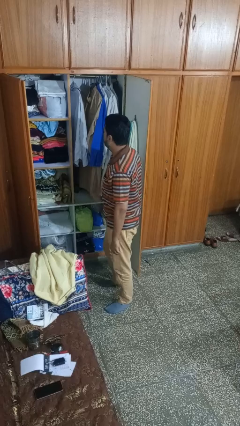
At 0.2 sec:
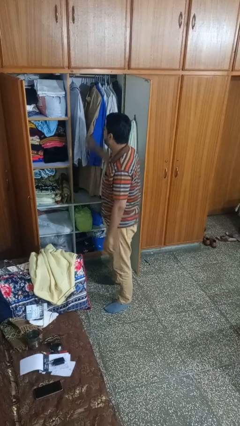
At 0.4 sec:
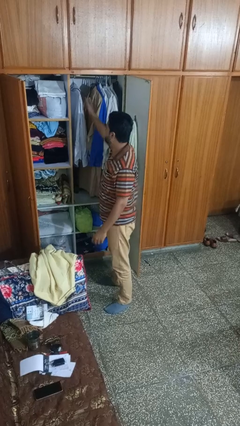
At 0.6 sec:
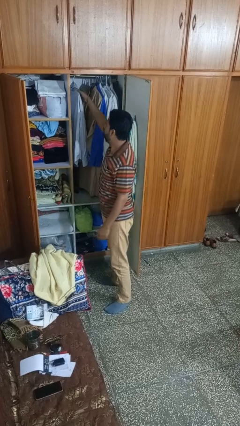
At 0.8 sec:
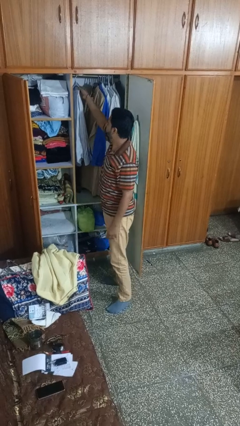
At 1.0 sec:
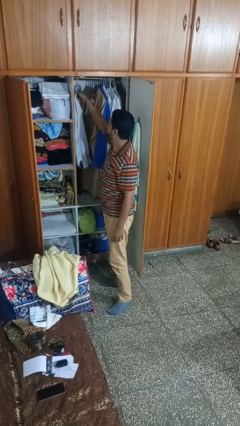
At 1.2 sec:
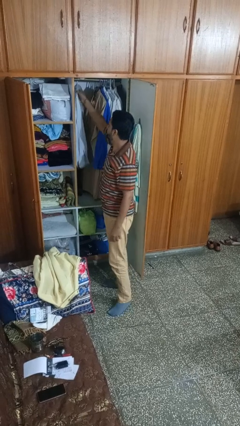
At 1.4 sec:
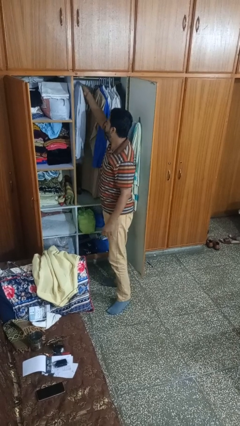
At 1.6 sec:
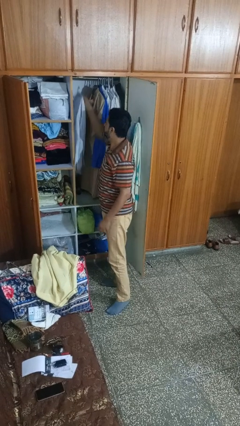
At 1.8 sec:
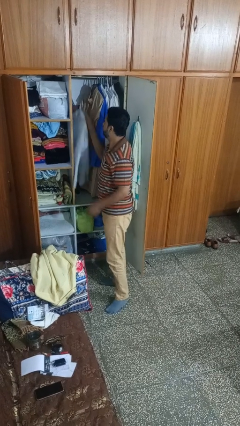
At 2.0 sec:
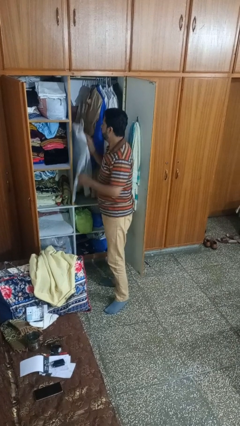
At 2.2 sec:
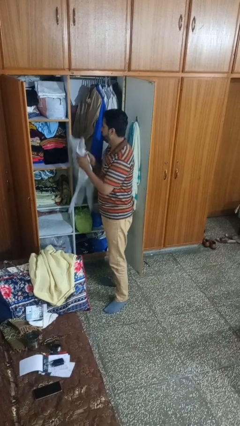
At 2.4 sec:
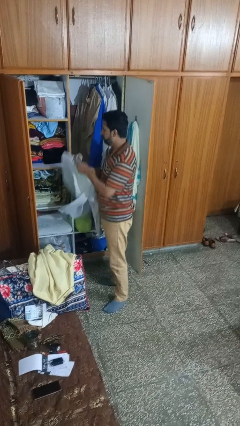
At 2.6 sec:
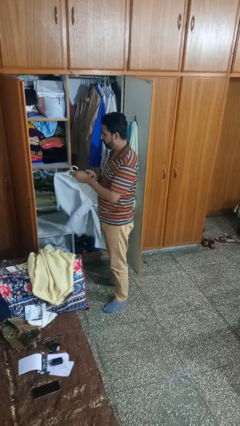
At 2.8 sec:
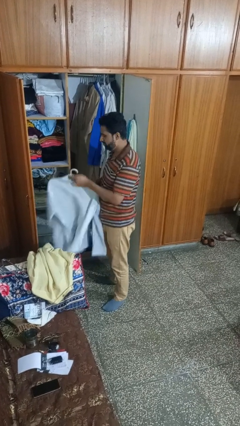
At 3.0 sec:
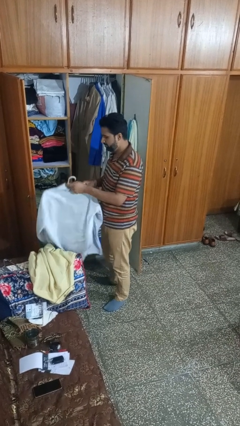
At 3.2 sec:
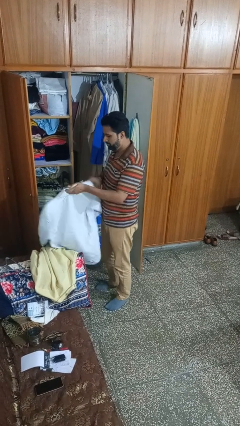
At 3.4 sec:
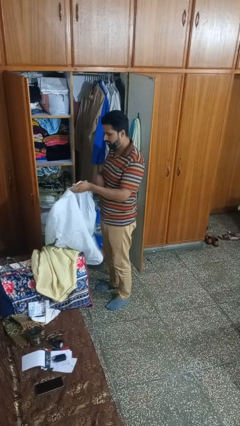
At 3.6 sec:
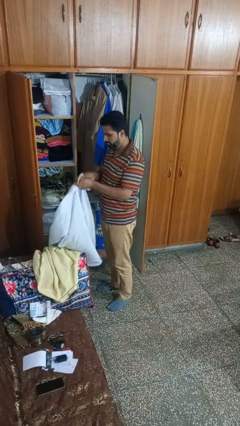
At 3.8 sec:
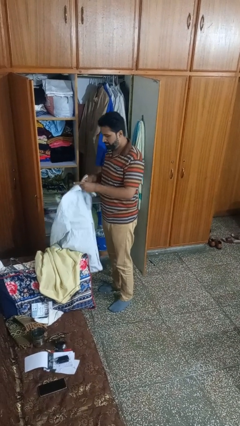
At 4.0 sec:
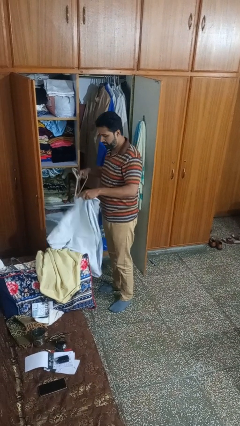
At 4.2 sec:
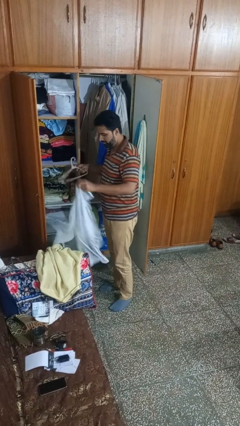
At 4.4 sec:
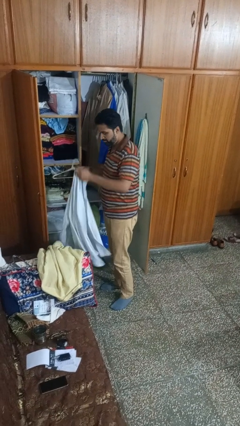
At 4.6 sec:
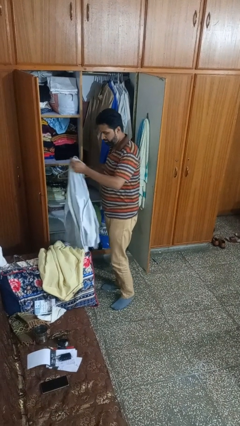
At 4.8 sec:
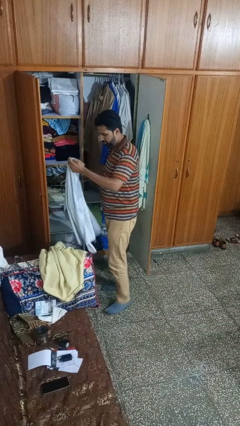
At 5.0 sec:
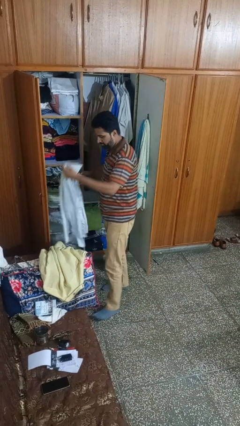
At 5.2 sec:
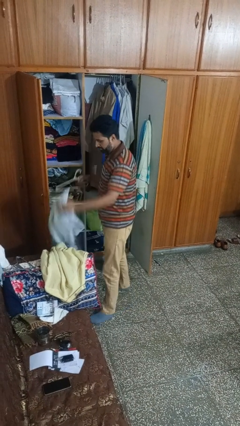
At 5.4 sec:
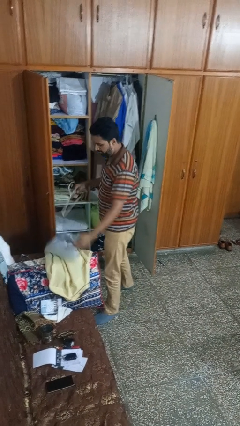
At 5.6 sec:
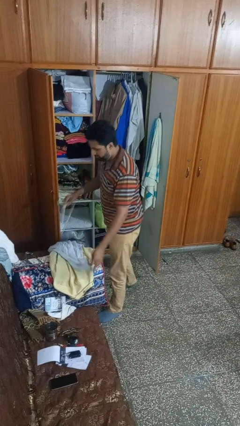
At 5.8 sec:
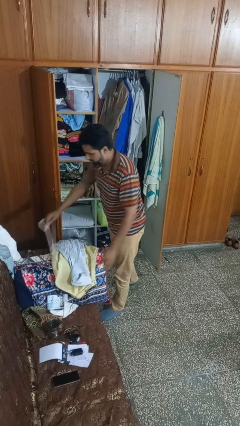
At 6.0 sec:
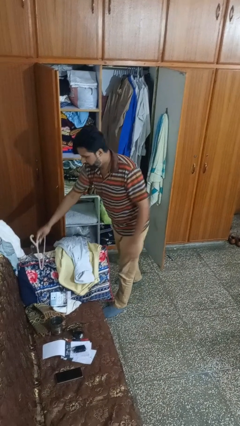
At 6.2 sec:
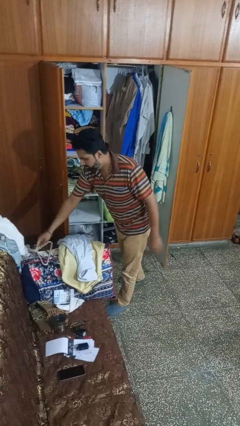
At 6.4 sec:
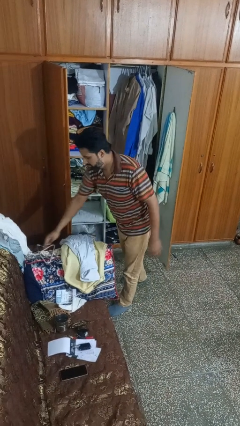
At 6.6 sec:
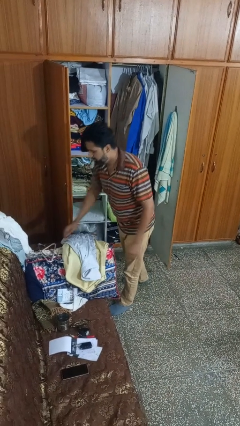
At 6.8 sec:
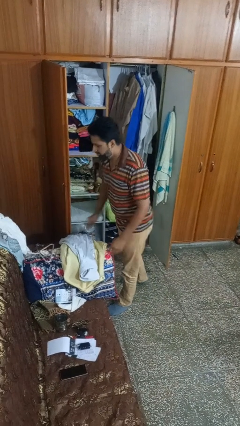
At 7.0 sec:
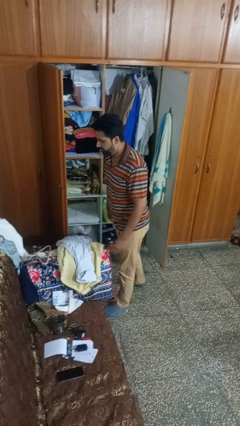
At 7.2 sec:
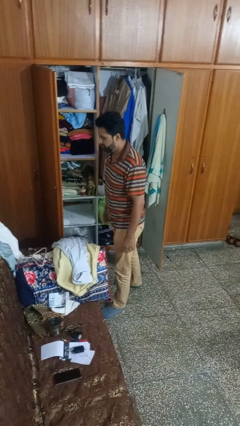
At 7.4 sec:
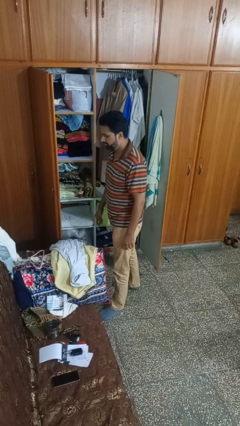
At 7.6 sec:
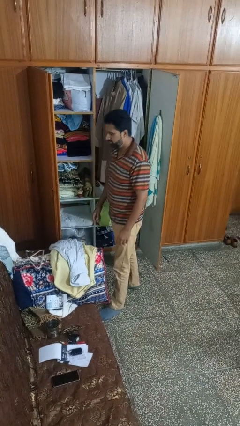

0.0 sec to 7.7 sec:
person takes clothes from closet

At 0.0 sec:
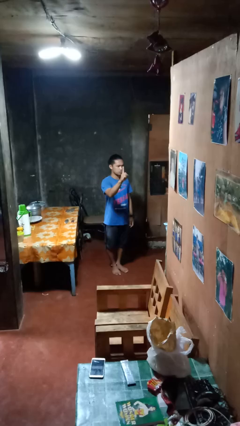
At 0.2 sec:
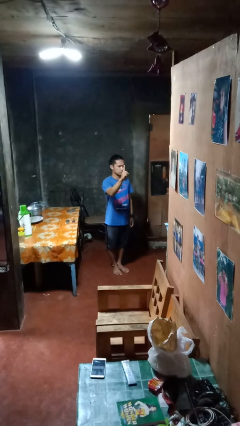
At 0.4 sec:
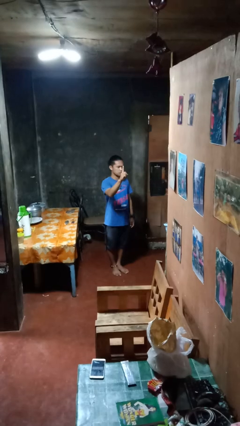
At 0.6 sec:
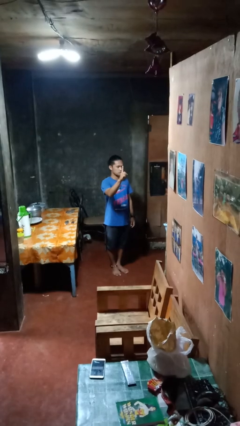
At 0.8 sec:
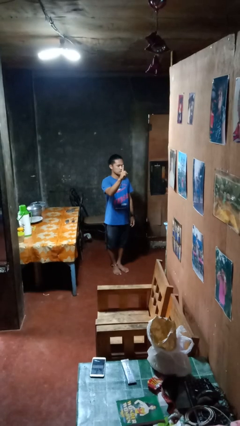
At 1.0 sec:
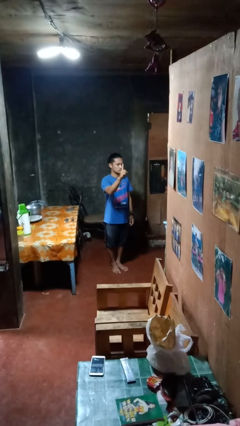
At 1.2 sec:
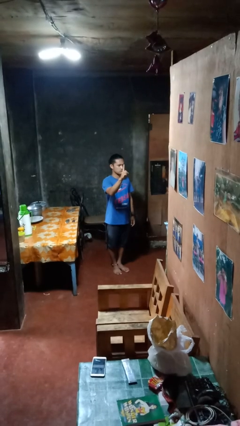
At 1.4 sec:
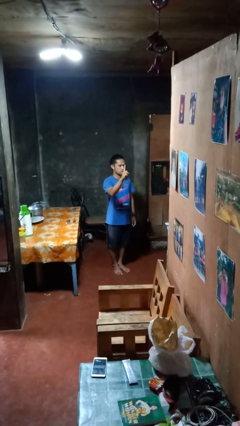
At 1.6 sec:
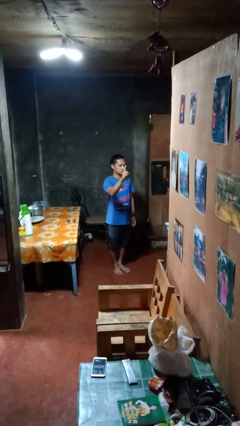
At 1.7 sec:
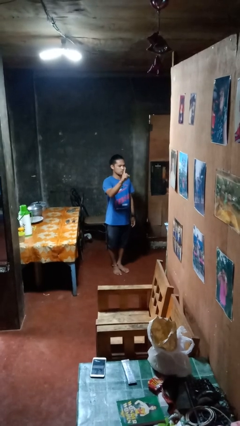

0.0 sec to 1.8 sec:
person gestures number one

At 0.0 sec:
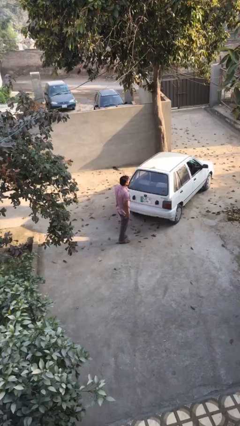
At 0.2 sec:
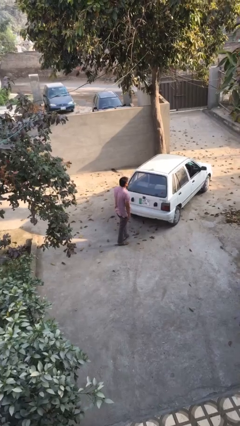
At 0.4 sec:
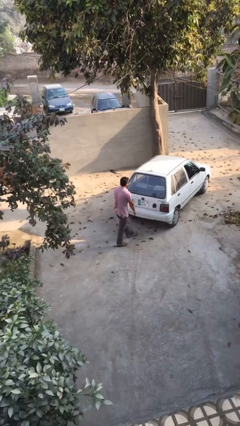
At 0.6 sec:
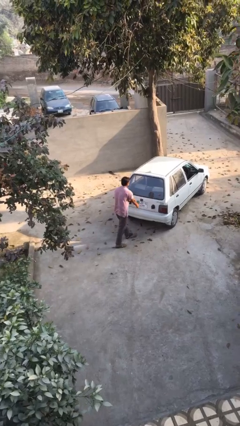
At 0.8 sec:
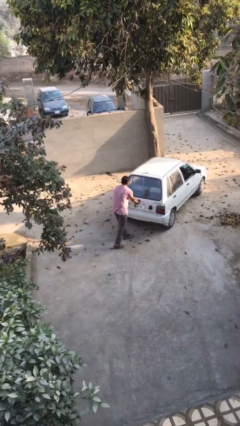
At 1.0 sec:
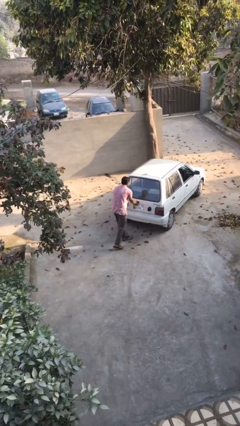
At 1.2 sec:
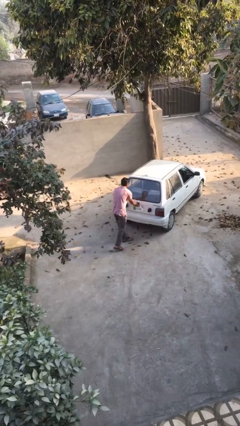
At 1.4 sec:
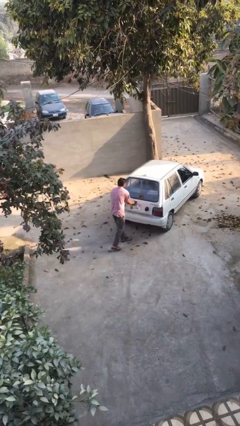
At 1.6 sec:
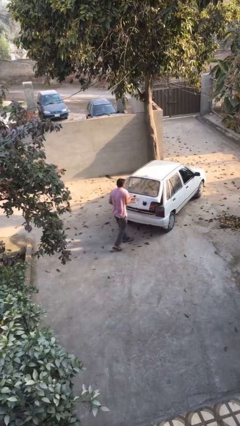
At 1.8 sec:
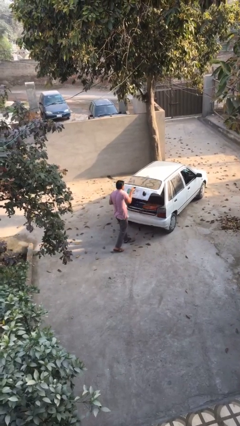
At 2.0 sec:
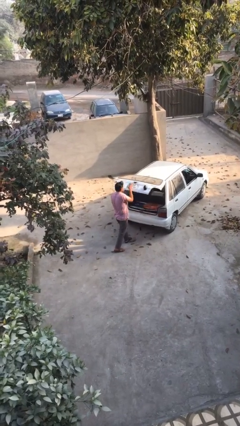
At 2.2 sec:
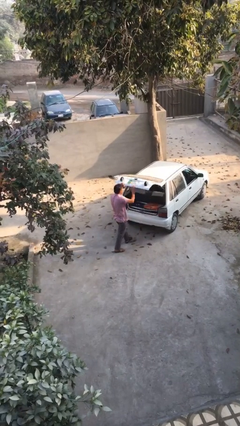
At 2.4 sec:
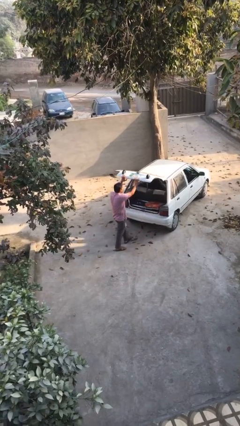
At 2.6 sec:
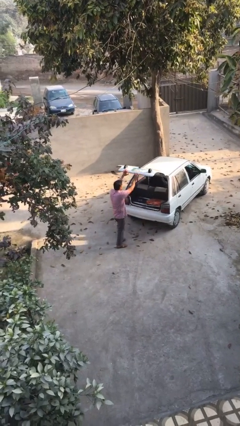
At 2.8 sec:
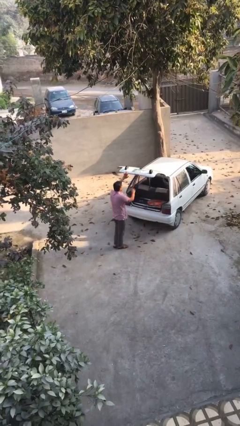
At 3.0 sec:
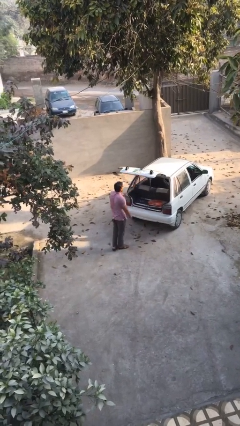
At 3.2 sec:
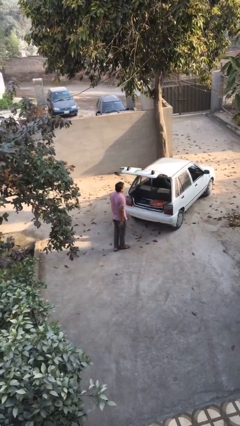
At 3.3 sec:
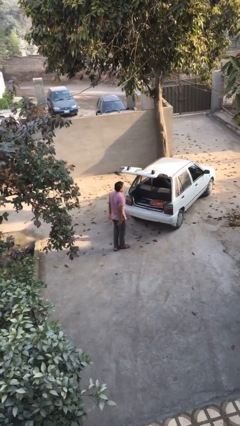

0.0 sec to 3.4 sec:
person opens car trunk

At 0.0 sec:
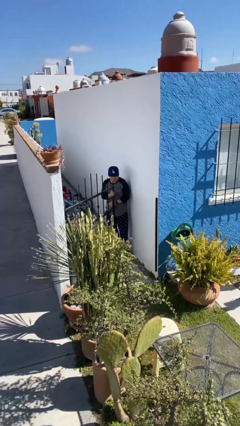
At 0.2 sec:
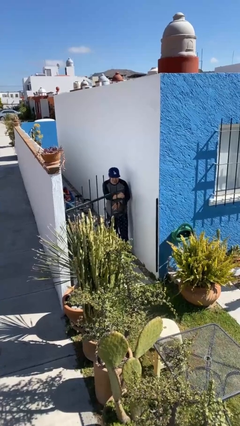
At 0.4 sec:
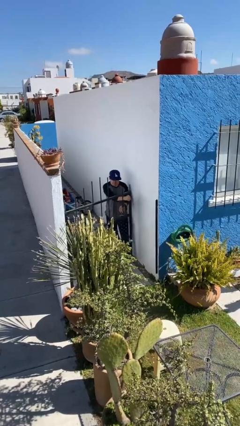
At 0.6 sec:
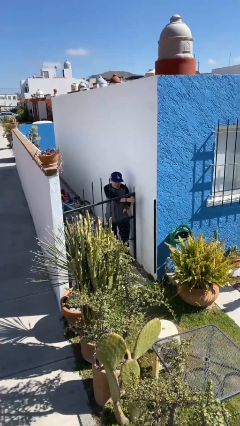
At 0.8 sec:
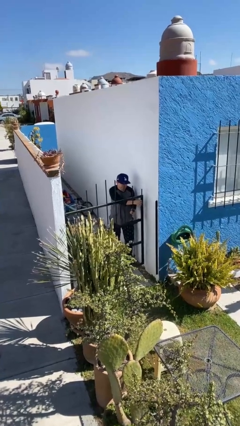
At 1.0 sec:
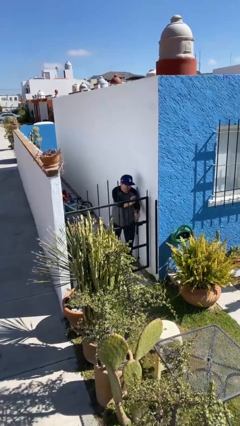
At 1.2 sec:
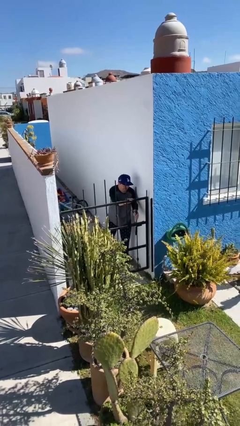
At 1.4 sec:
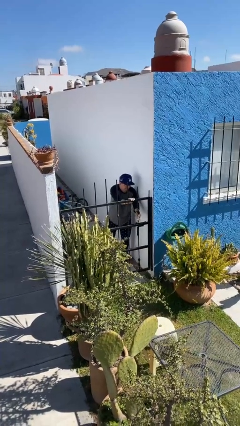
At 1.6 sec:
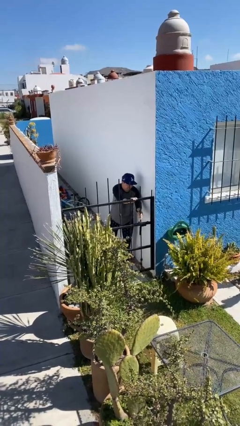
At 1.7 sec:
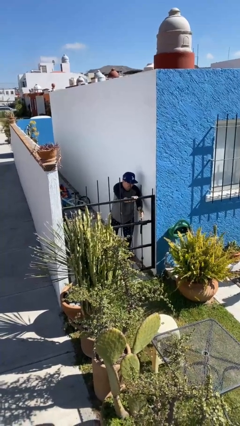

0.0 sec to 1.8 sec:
person closes facility door

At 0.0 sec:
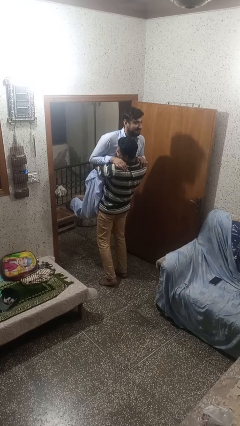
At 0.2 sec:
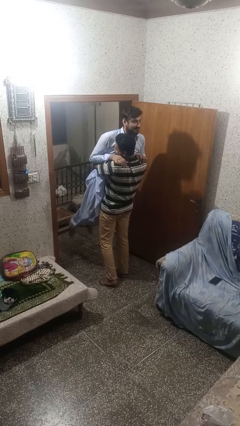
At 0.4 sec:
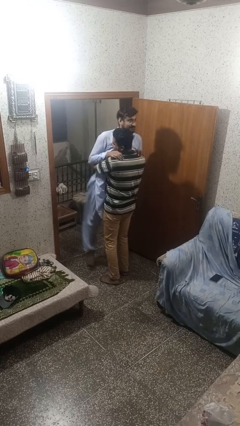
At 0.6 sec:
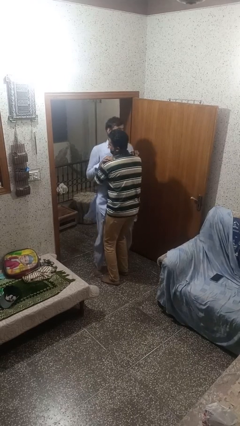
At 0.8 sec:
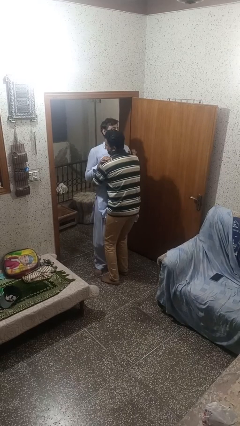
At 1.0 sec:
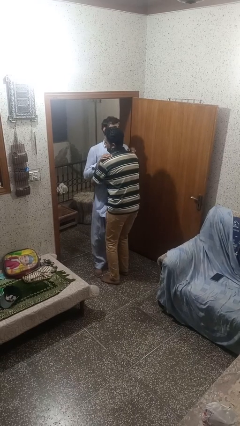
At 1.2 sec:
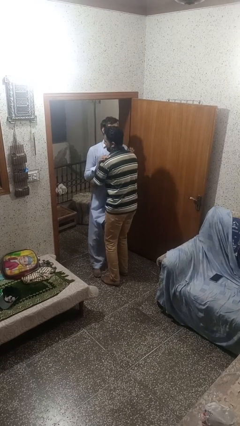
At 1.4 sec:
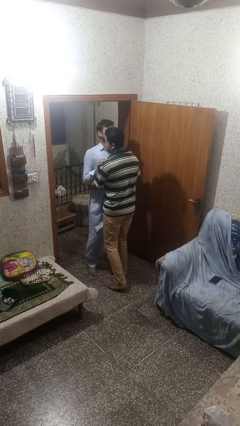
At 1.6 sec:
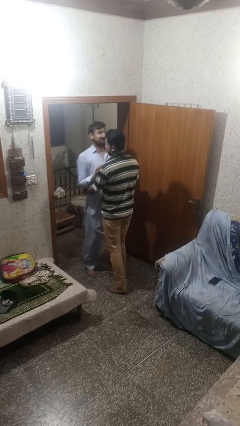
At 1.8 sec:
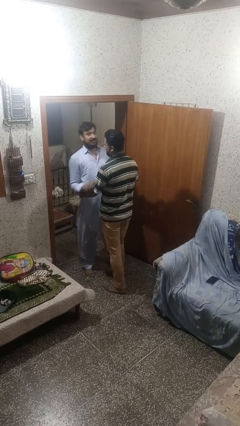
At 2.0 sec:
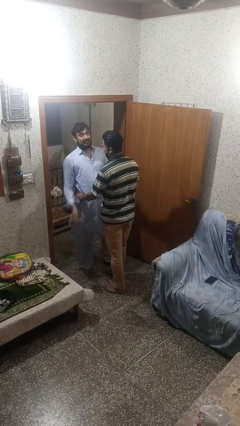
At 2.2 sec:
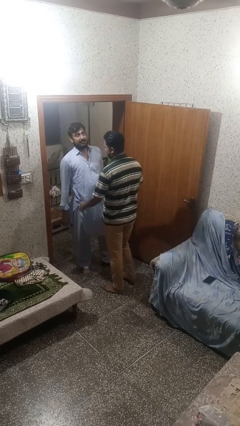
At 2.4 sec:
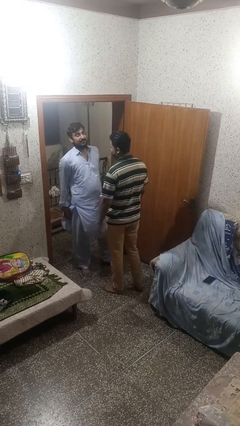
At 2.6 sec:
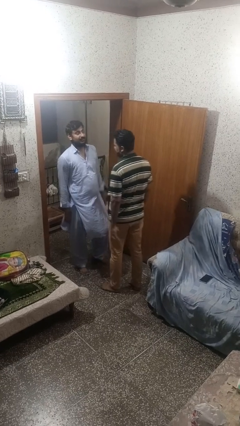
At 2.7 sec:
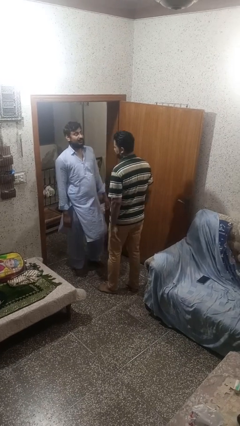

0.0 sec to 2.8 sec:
person puts down person
